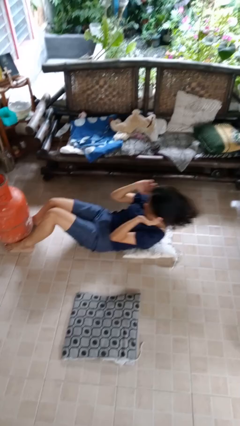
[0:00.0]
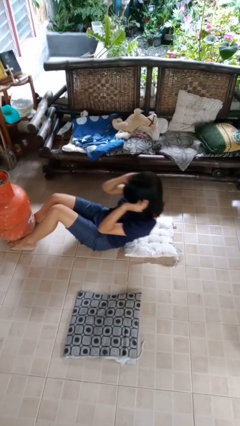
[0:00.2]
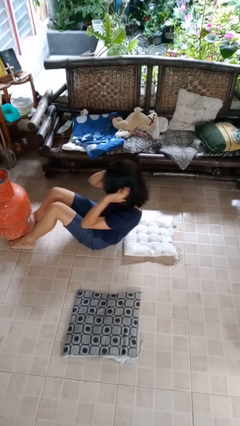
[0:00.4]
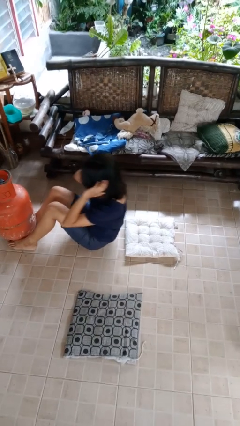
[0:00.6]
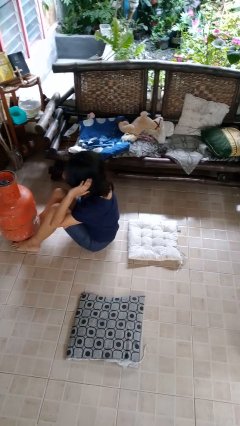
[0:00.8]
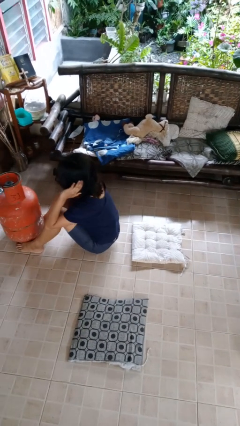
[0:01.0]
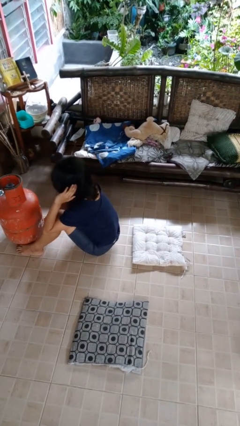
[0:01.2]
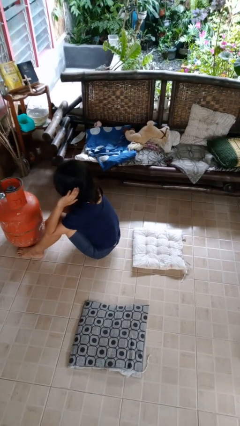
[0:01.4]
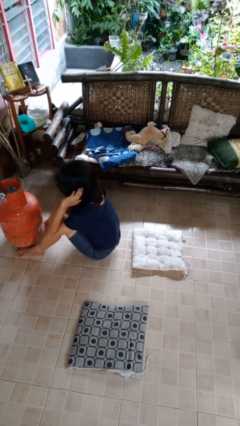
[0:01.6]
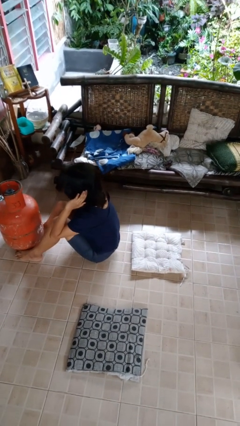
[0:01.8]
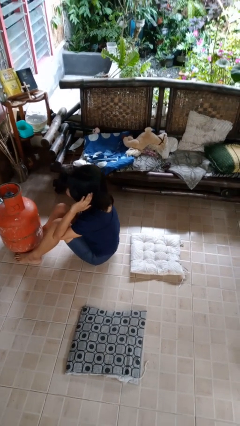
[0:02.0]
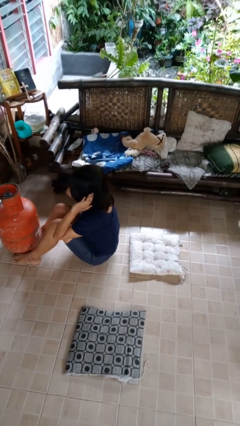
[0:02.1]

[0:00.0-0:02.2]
person exercises with situp

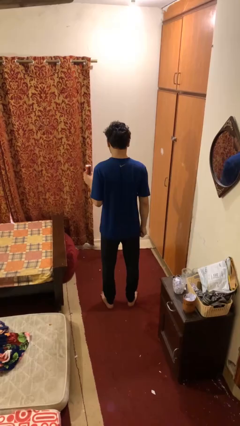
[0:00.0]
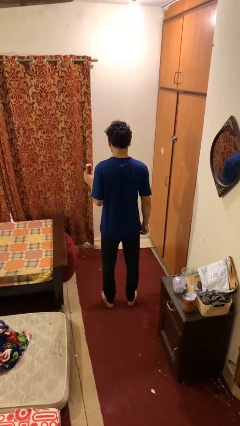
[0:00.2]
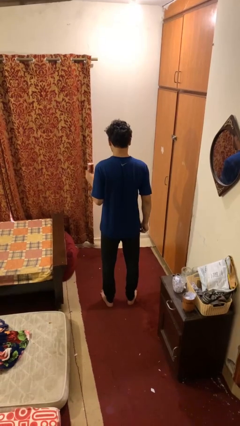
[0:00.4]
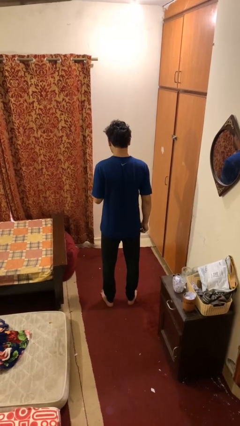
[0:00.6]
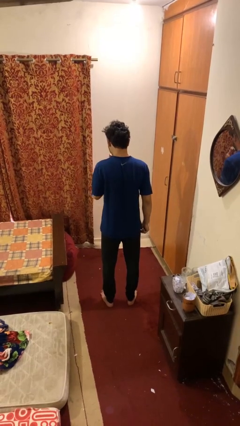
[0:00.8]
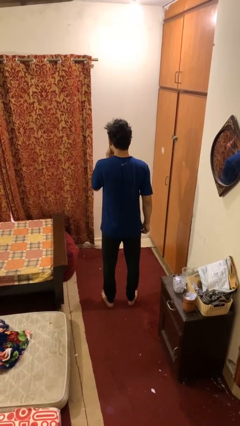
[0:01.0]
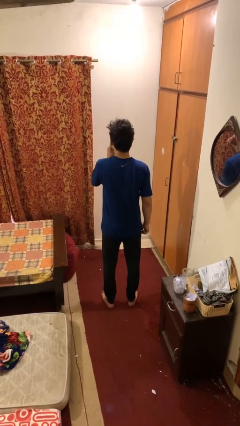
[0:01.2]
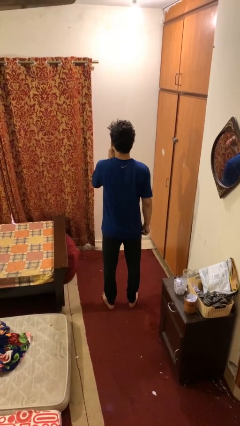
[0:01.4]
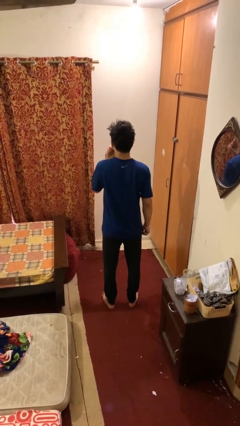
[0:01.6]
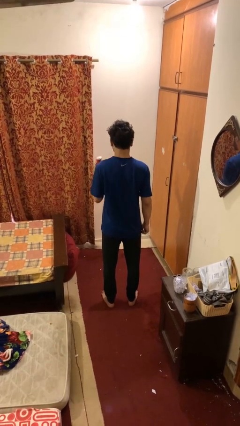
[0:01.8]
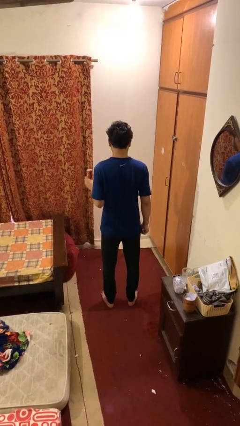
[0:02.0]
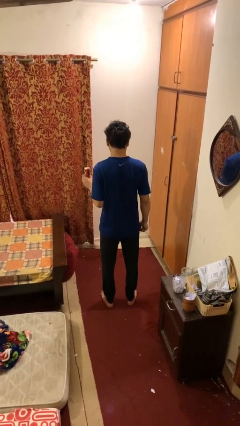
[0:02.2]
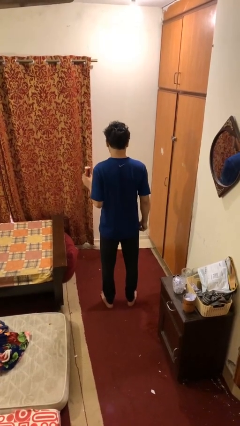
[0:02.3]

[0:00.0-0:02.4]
person drinks from beverage can

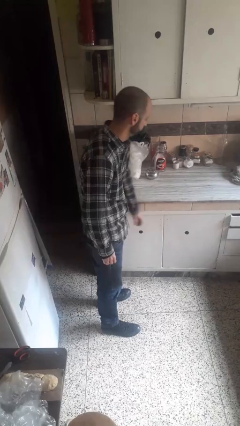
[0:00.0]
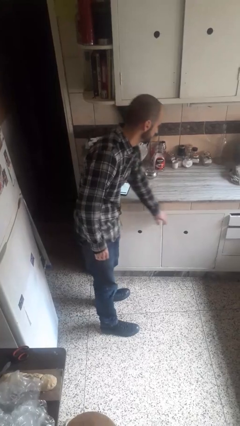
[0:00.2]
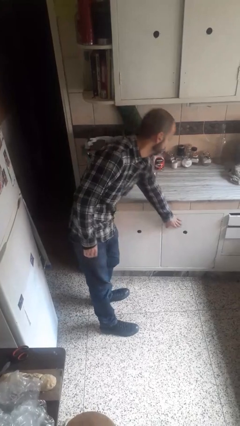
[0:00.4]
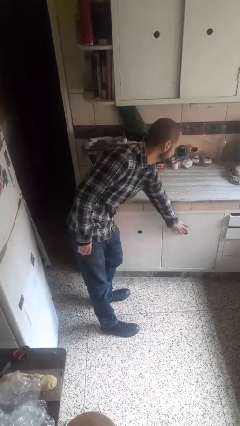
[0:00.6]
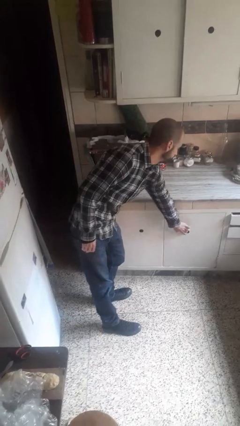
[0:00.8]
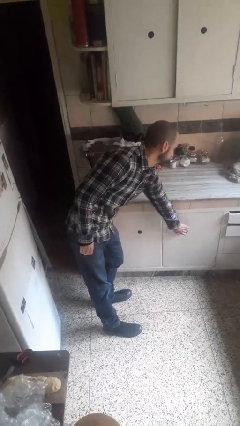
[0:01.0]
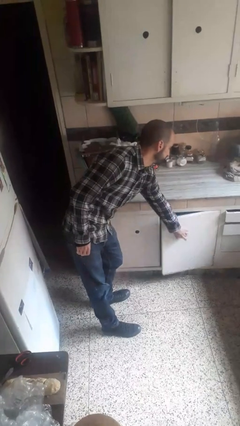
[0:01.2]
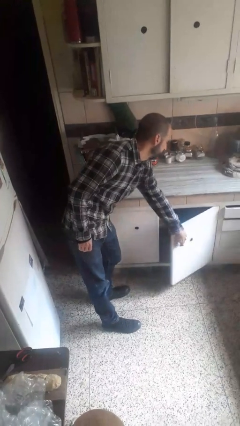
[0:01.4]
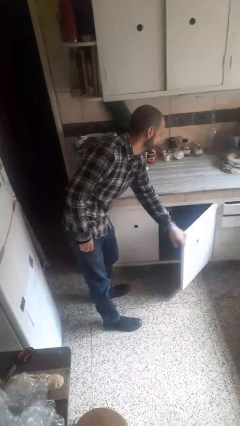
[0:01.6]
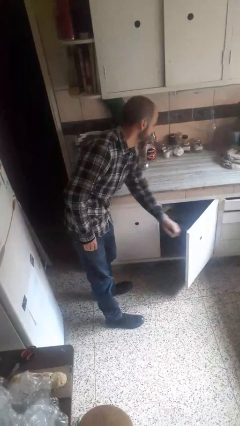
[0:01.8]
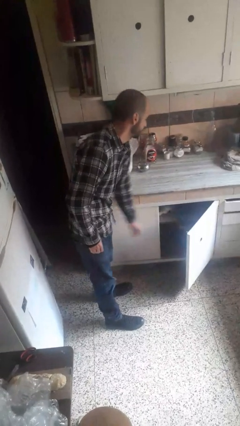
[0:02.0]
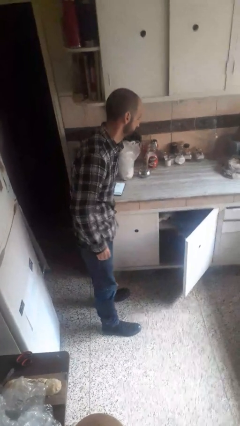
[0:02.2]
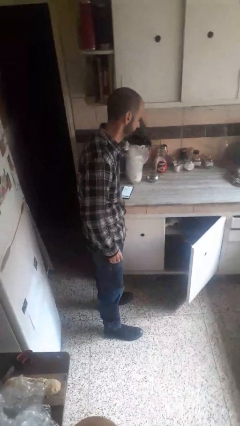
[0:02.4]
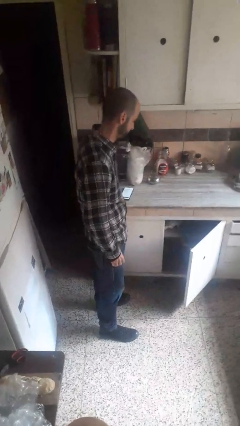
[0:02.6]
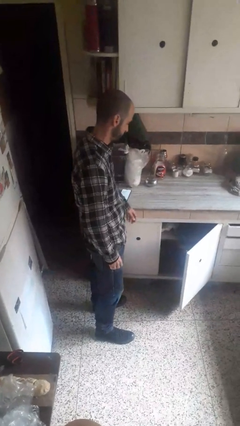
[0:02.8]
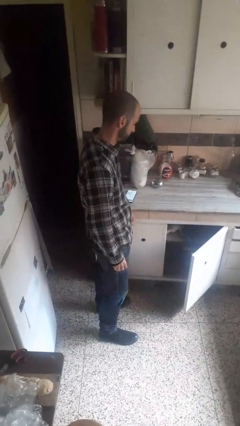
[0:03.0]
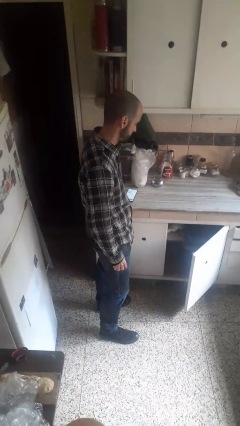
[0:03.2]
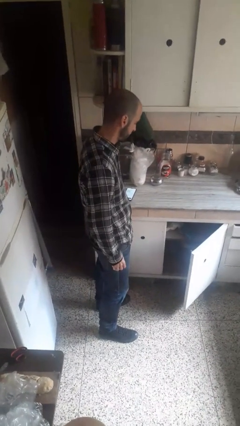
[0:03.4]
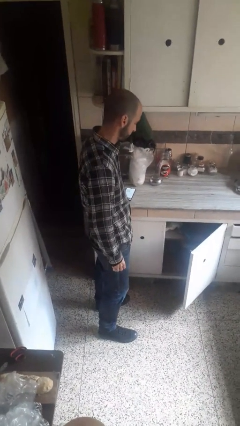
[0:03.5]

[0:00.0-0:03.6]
person opens closet door

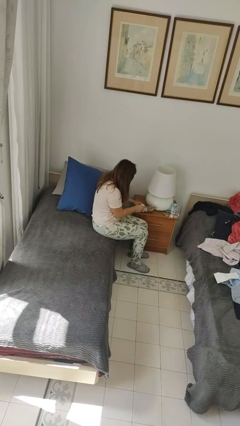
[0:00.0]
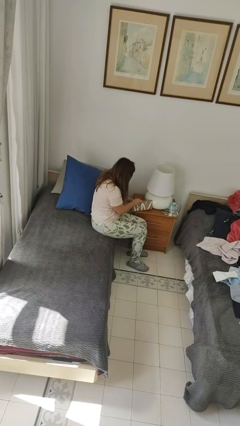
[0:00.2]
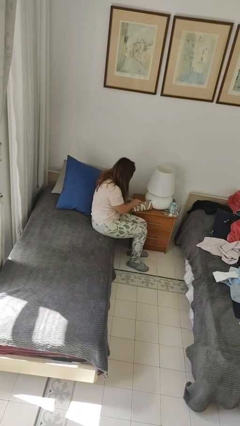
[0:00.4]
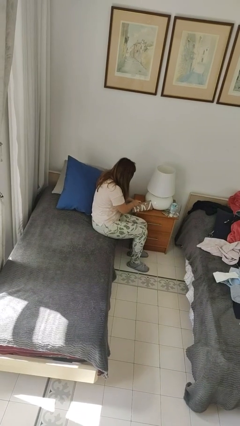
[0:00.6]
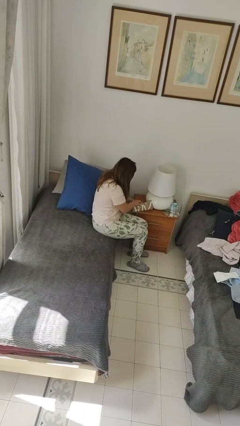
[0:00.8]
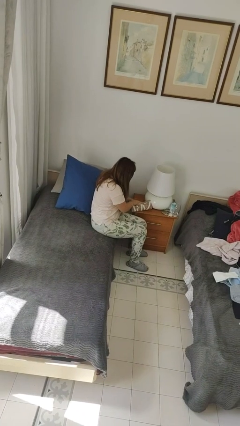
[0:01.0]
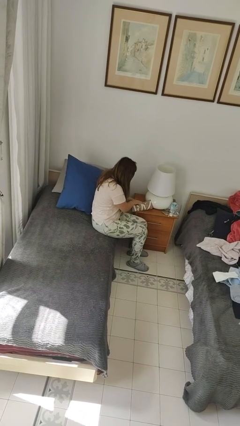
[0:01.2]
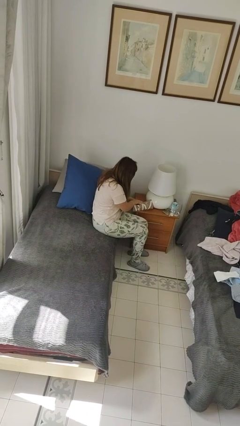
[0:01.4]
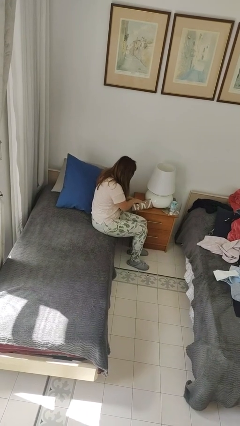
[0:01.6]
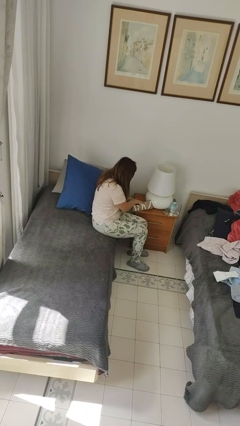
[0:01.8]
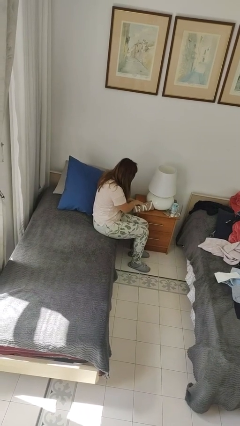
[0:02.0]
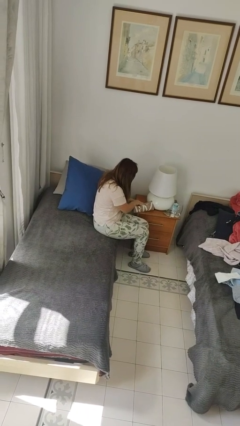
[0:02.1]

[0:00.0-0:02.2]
person wraps box

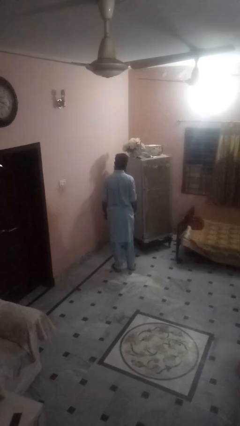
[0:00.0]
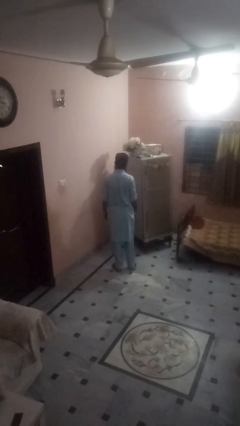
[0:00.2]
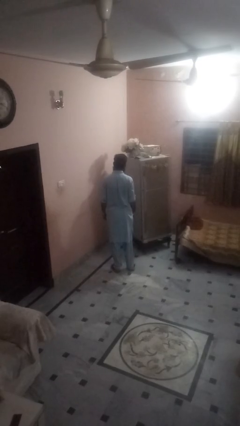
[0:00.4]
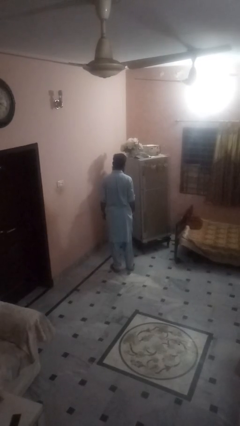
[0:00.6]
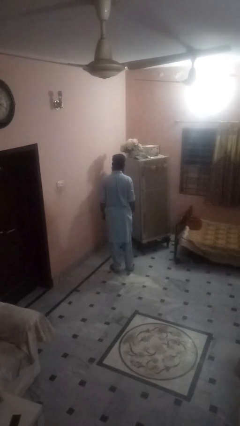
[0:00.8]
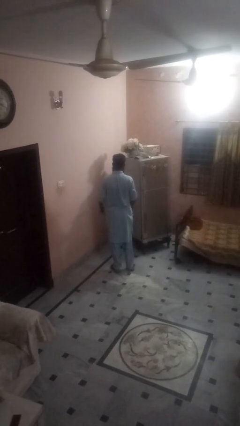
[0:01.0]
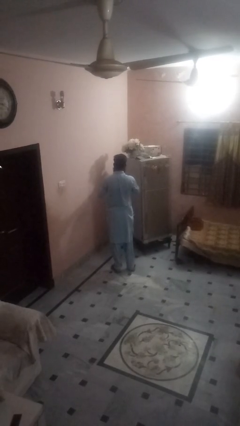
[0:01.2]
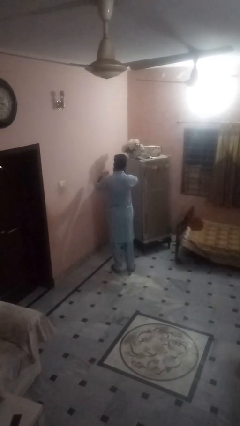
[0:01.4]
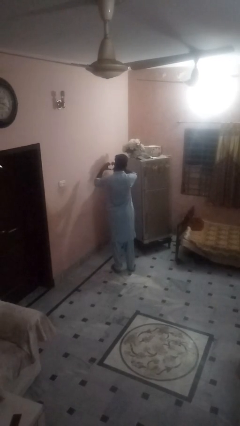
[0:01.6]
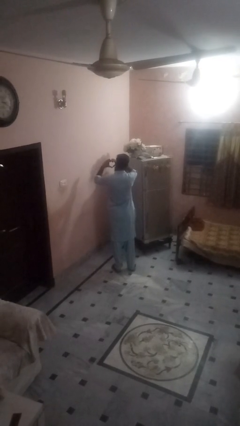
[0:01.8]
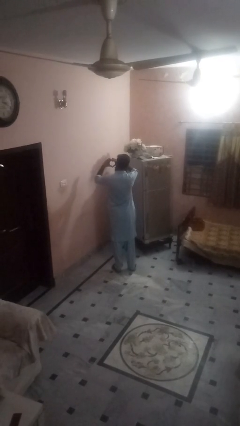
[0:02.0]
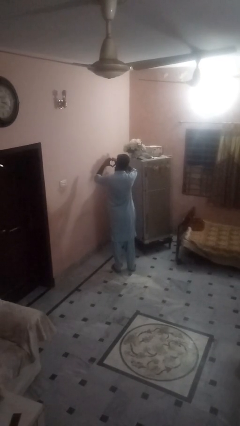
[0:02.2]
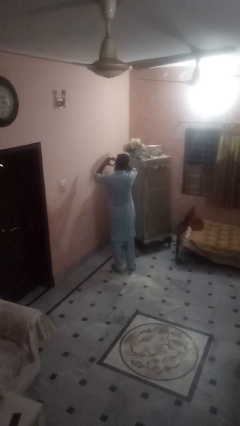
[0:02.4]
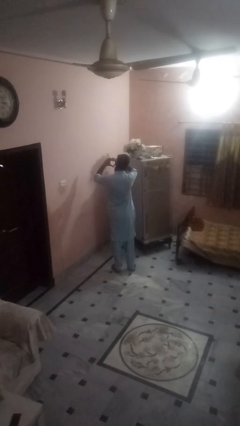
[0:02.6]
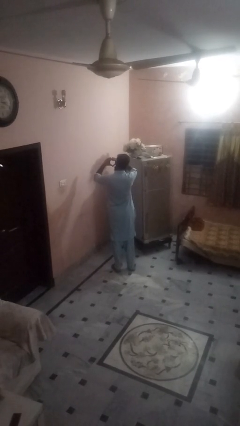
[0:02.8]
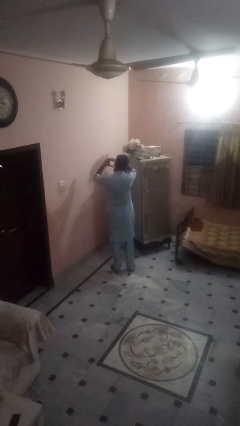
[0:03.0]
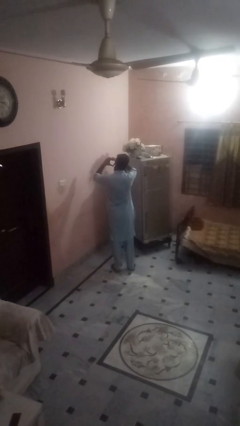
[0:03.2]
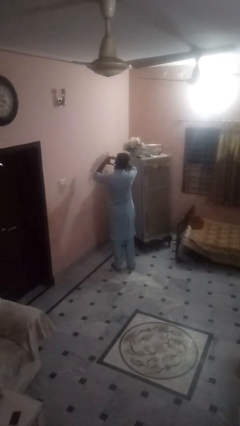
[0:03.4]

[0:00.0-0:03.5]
person gestures heart

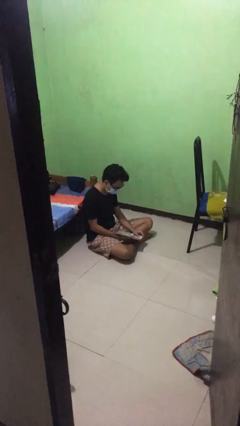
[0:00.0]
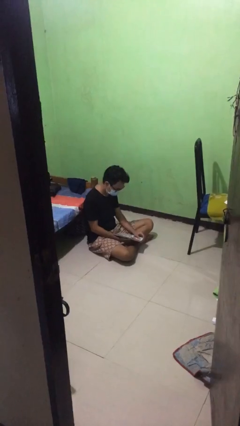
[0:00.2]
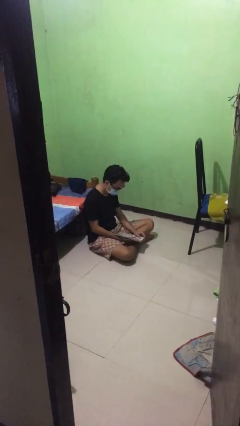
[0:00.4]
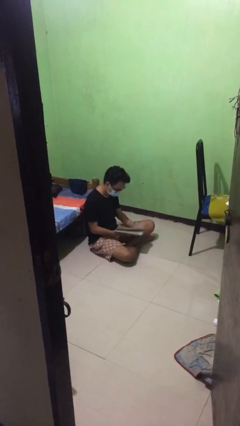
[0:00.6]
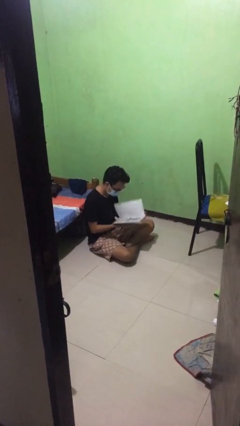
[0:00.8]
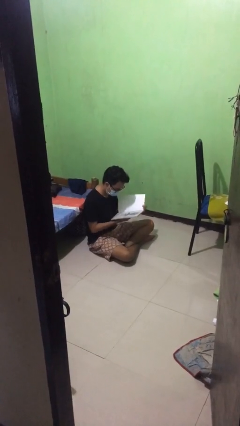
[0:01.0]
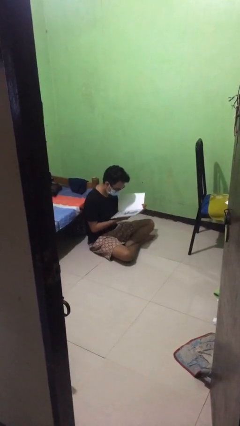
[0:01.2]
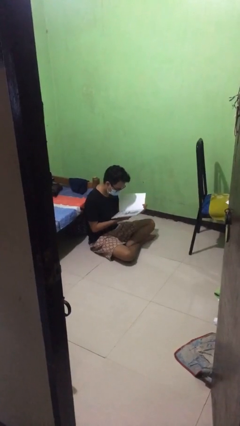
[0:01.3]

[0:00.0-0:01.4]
person reads document

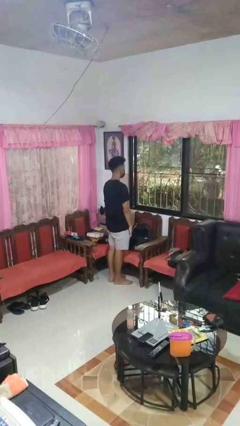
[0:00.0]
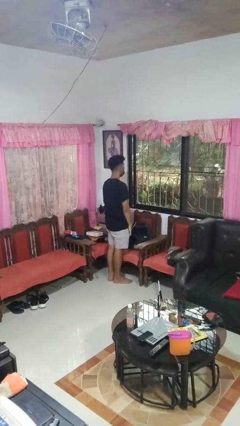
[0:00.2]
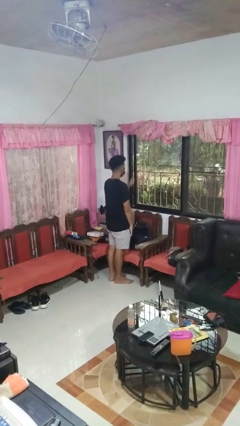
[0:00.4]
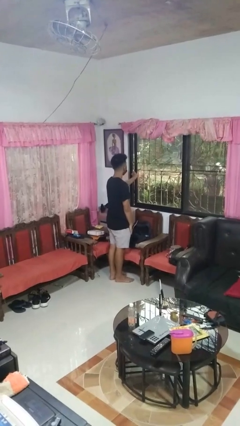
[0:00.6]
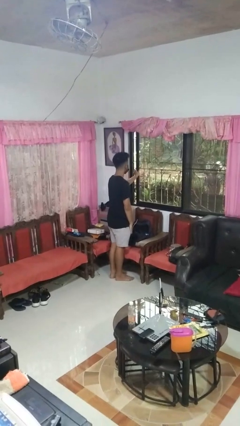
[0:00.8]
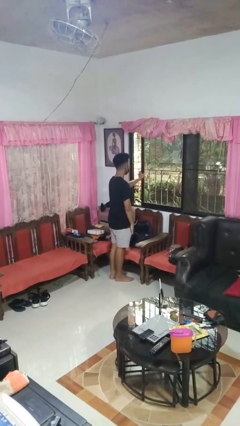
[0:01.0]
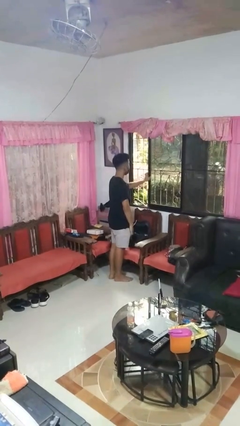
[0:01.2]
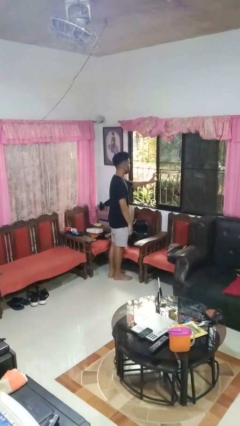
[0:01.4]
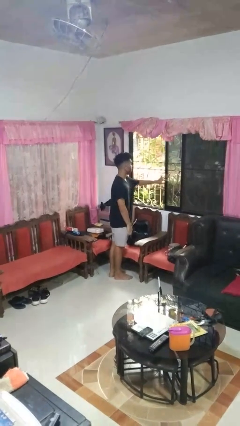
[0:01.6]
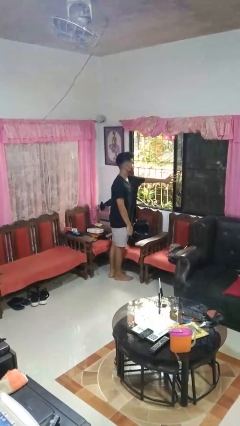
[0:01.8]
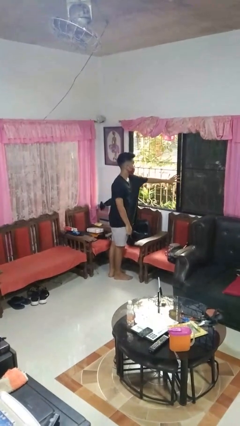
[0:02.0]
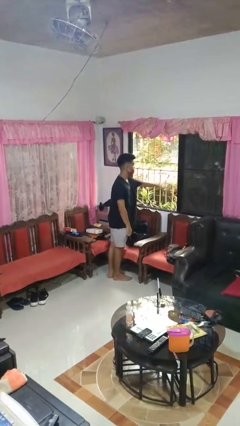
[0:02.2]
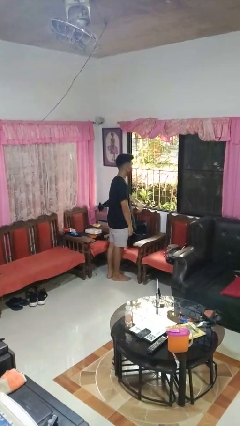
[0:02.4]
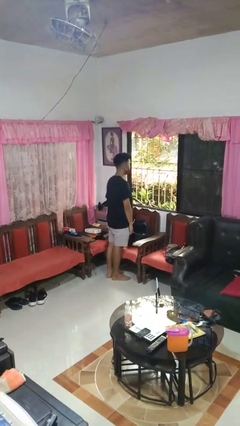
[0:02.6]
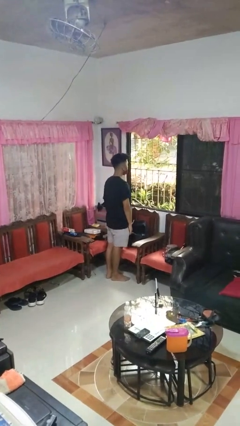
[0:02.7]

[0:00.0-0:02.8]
person opens home window
